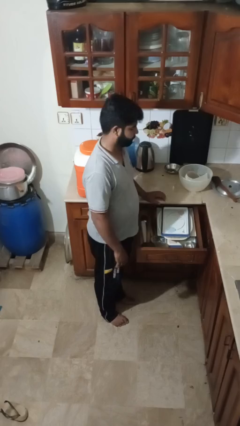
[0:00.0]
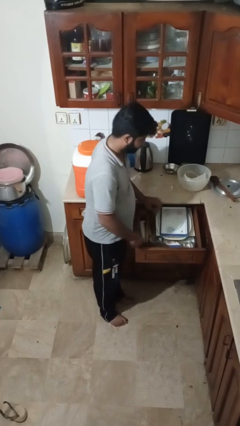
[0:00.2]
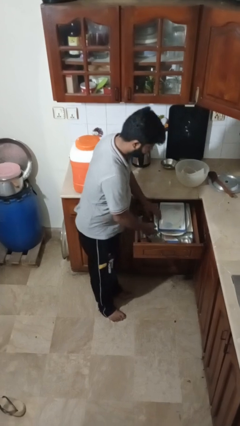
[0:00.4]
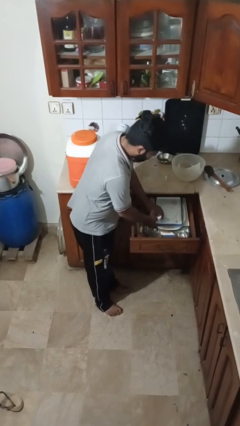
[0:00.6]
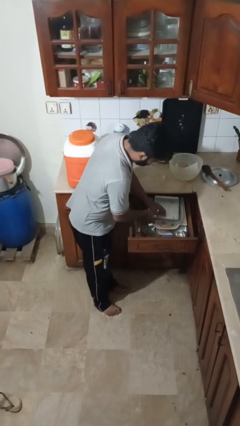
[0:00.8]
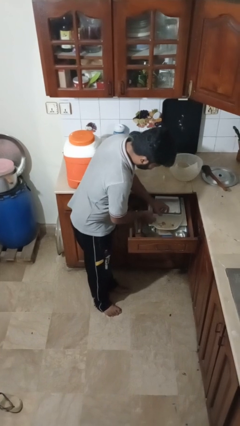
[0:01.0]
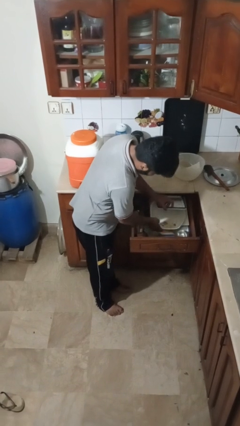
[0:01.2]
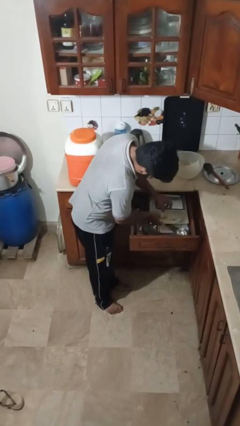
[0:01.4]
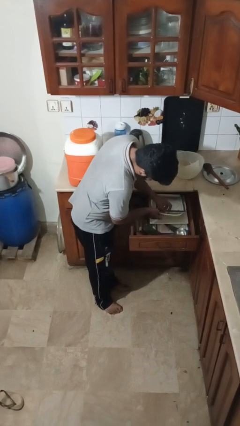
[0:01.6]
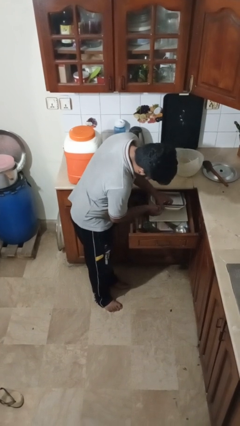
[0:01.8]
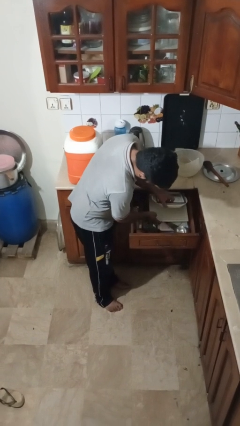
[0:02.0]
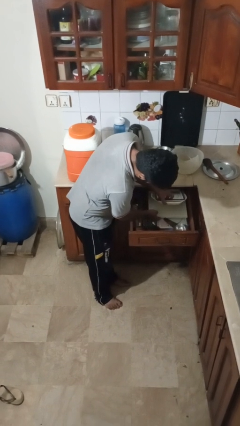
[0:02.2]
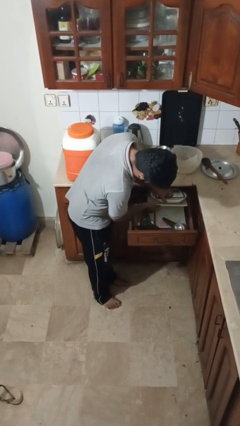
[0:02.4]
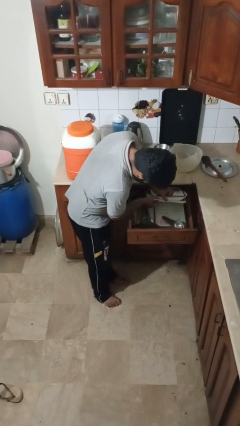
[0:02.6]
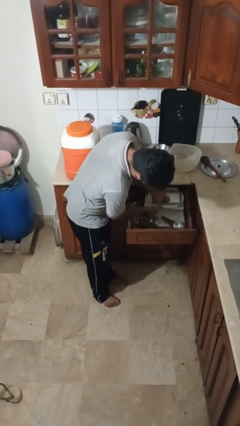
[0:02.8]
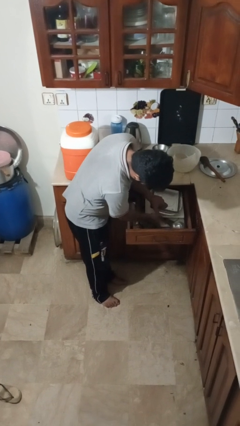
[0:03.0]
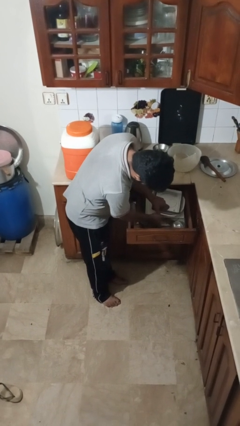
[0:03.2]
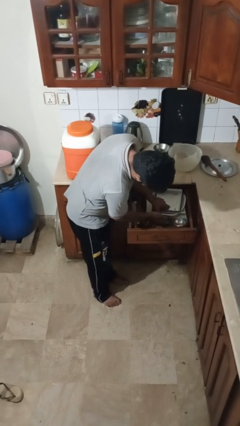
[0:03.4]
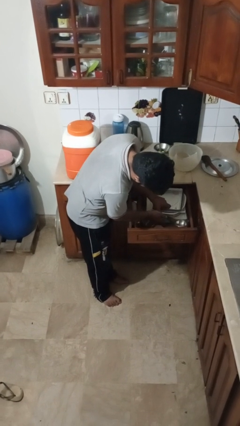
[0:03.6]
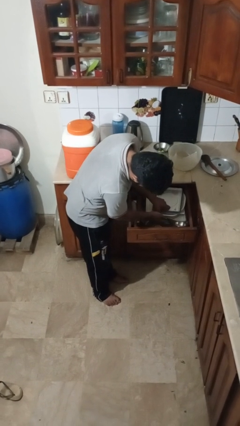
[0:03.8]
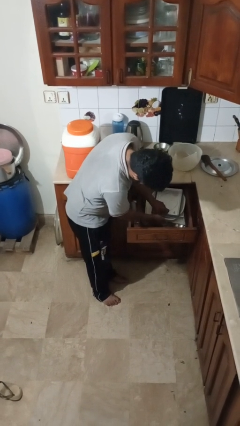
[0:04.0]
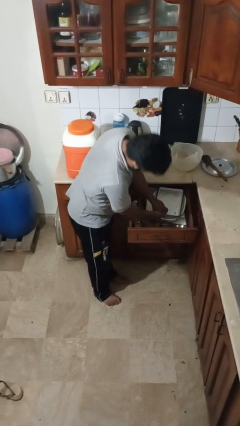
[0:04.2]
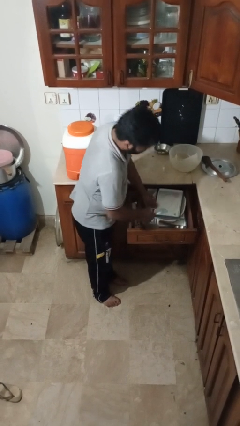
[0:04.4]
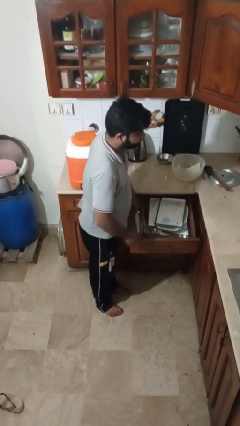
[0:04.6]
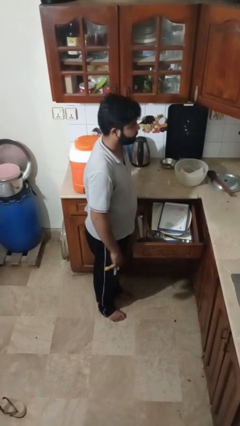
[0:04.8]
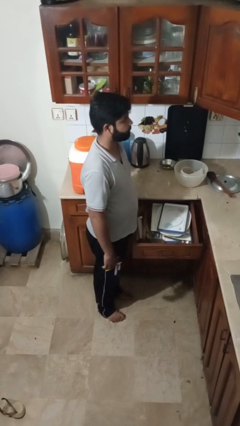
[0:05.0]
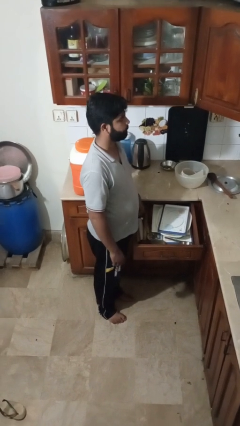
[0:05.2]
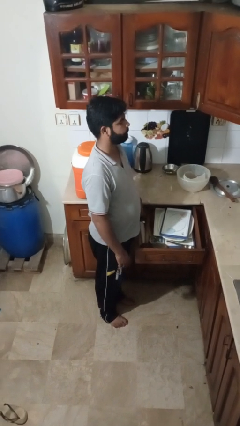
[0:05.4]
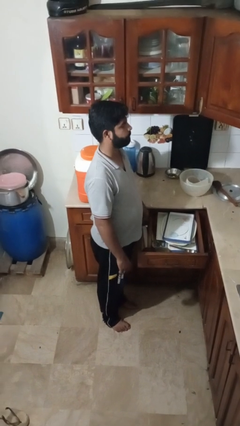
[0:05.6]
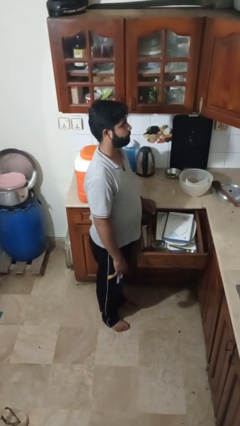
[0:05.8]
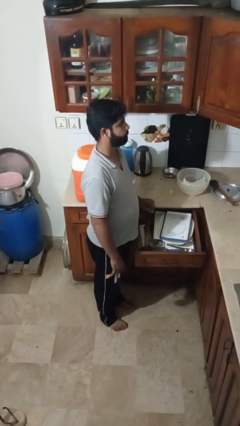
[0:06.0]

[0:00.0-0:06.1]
person searches in kitchen drawer

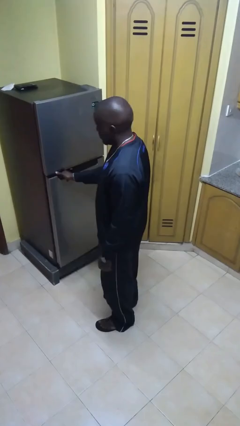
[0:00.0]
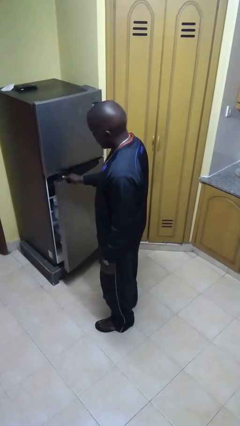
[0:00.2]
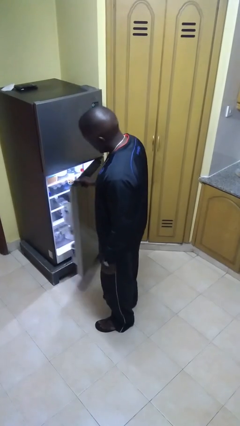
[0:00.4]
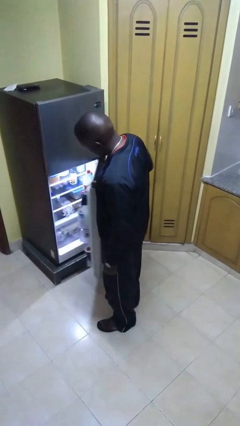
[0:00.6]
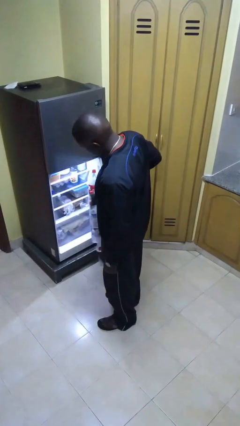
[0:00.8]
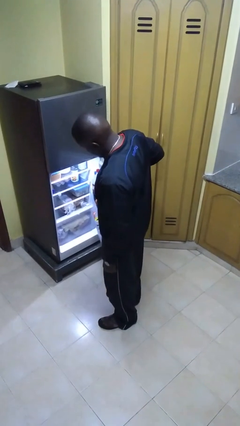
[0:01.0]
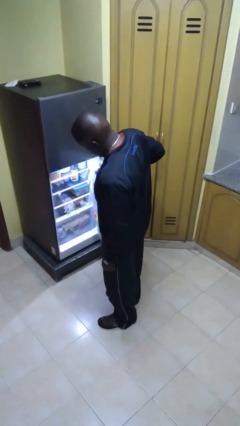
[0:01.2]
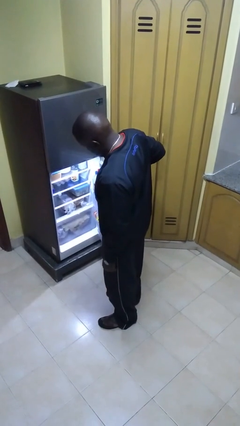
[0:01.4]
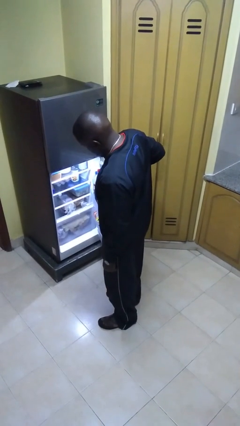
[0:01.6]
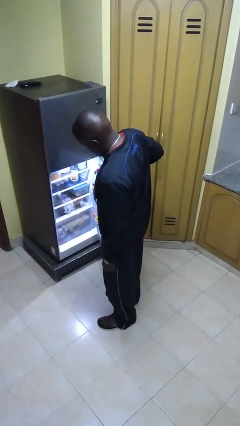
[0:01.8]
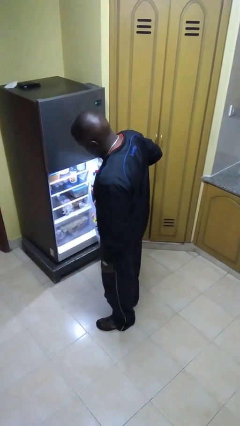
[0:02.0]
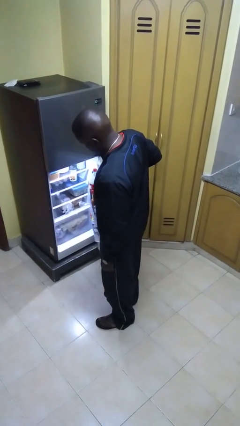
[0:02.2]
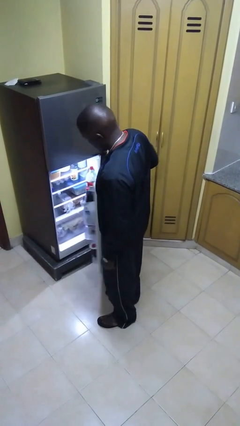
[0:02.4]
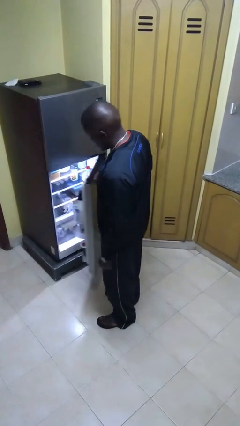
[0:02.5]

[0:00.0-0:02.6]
person dries hands with towel

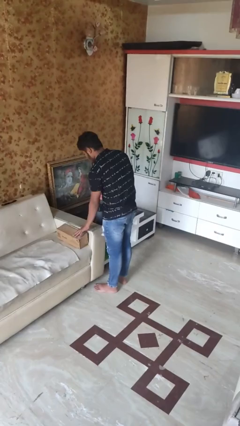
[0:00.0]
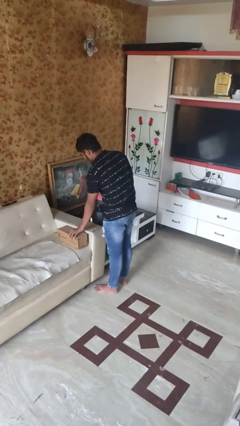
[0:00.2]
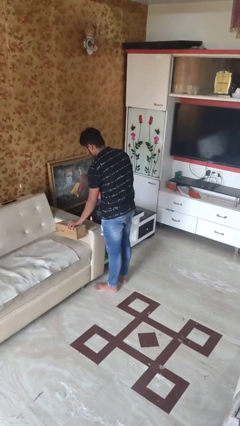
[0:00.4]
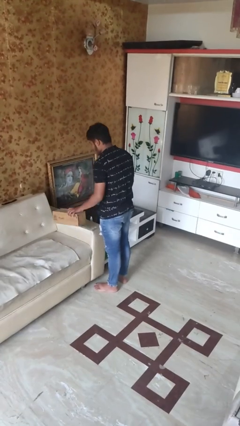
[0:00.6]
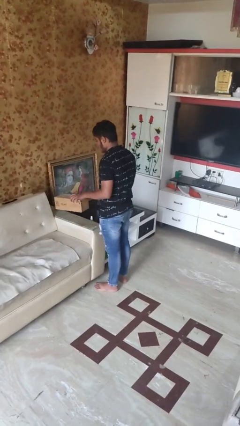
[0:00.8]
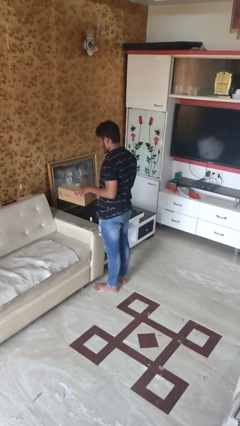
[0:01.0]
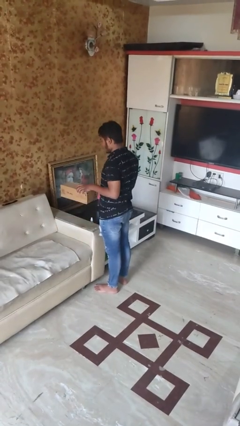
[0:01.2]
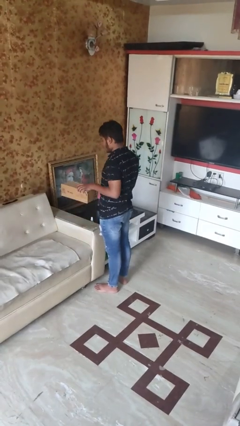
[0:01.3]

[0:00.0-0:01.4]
person picks up object from couch

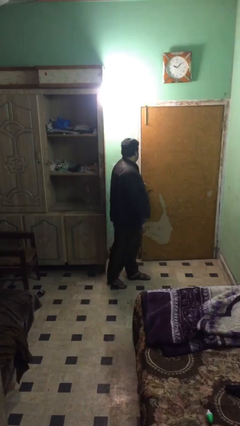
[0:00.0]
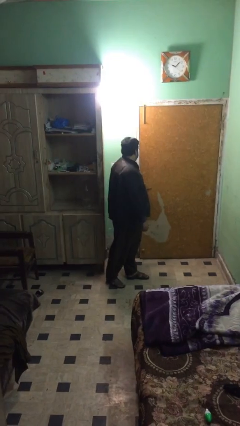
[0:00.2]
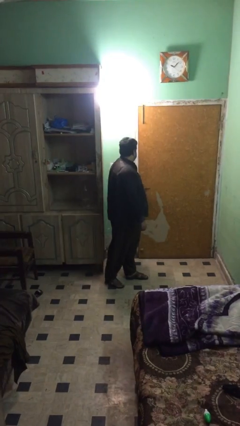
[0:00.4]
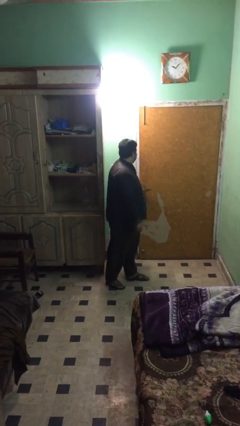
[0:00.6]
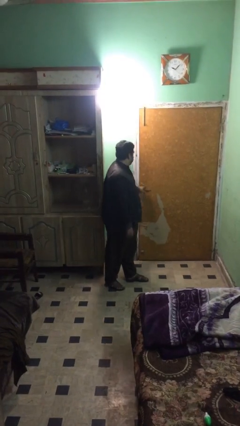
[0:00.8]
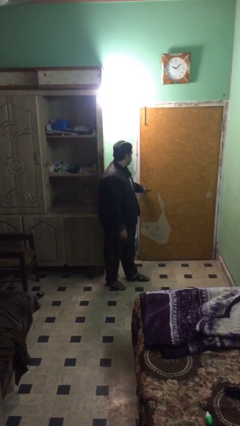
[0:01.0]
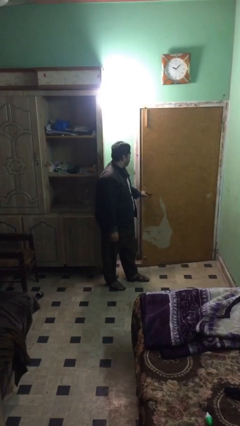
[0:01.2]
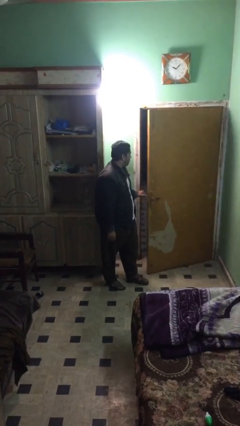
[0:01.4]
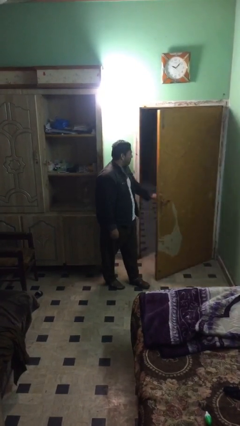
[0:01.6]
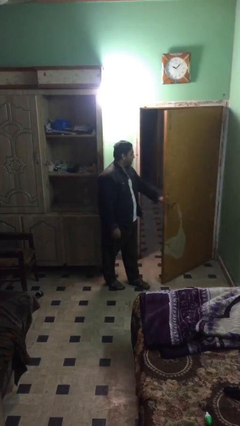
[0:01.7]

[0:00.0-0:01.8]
person opens facility door

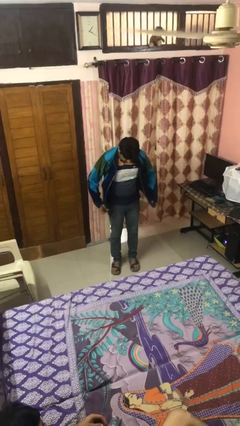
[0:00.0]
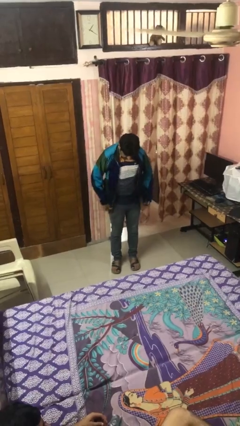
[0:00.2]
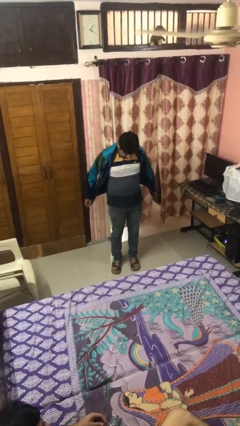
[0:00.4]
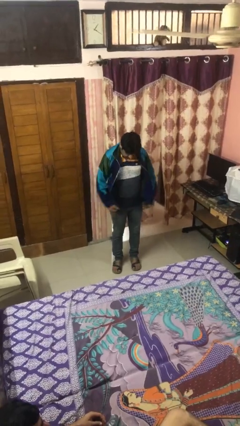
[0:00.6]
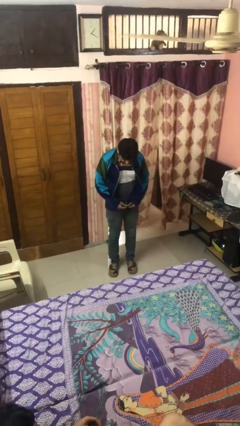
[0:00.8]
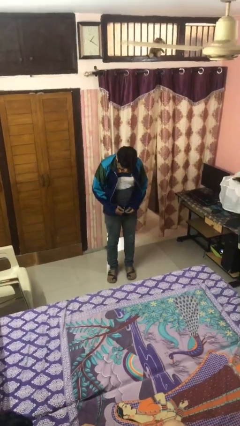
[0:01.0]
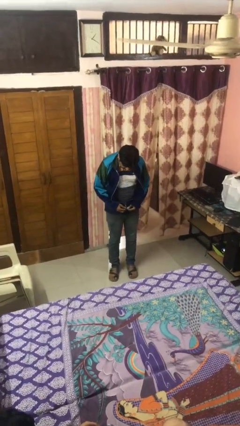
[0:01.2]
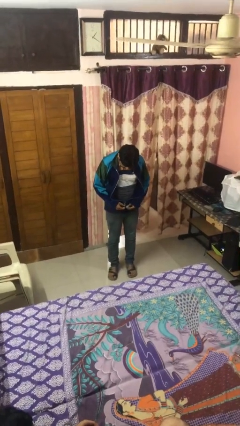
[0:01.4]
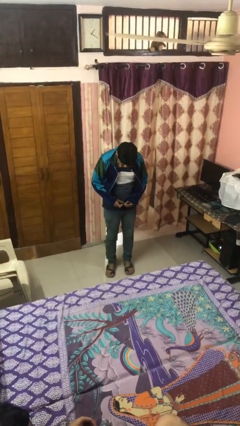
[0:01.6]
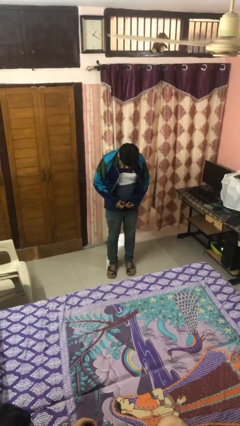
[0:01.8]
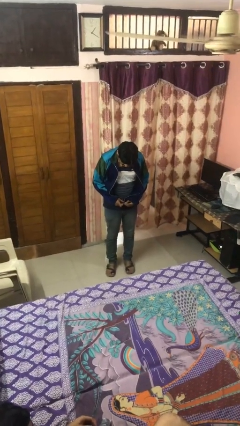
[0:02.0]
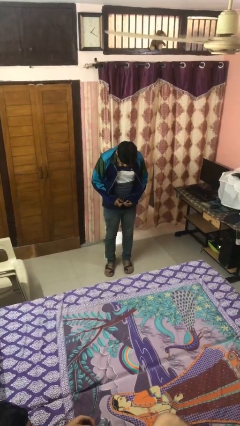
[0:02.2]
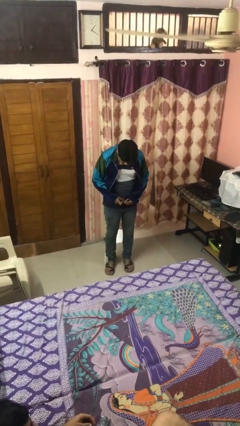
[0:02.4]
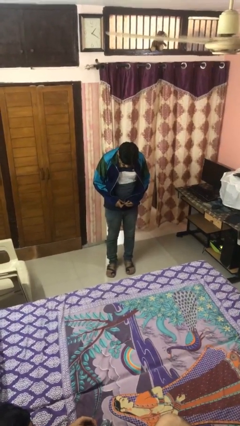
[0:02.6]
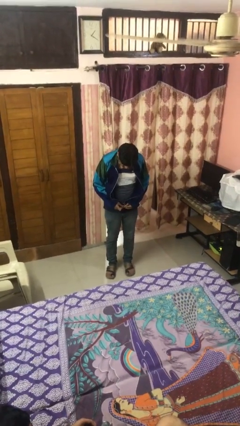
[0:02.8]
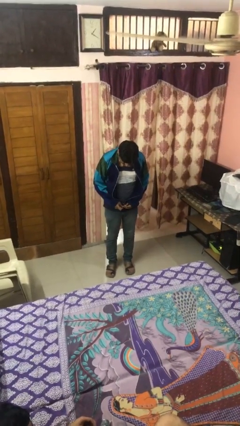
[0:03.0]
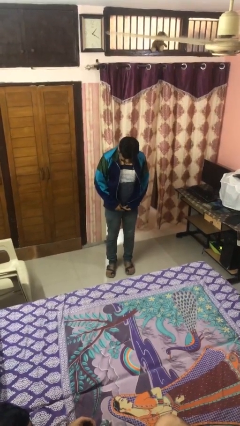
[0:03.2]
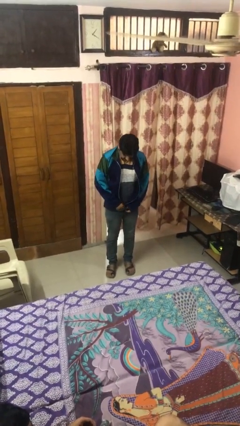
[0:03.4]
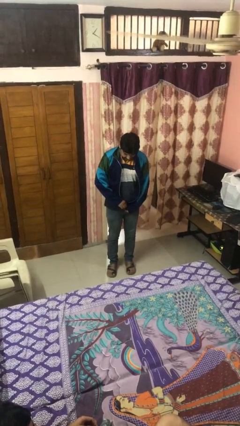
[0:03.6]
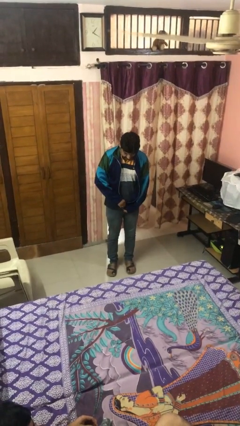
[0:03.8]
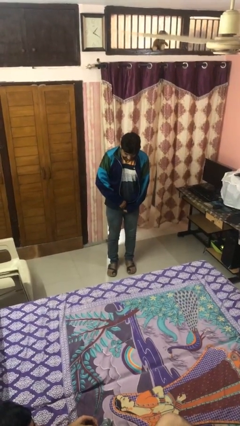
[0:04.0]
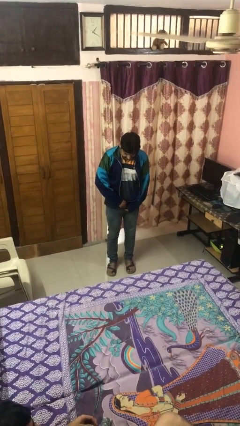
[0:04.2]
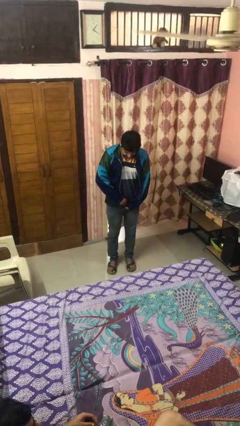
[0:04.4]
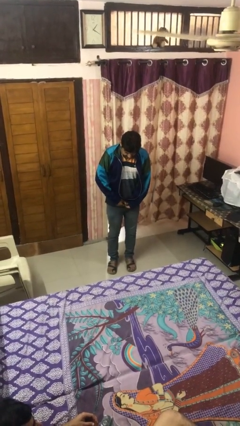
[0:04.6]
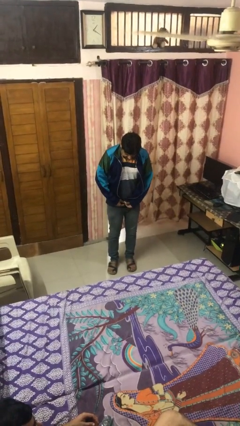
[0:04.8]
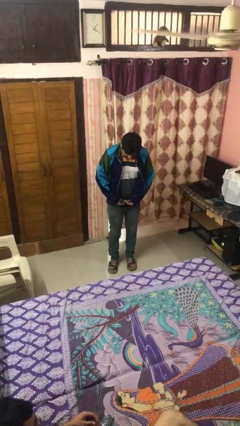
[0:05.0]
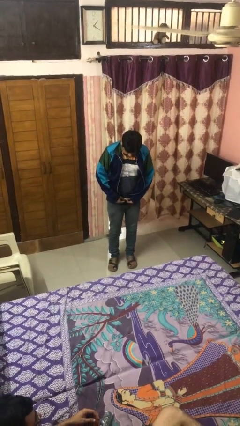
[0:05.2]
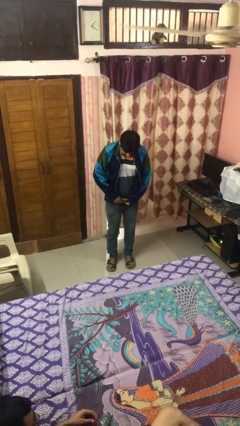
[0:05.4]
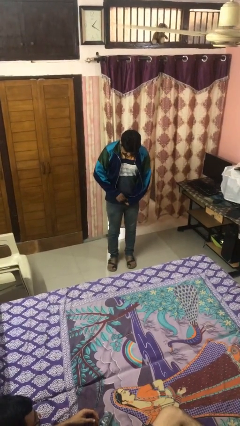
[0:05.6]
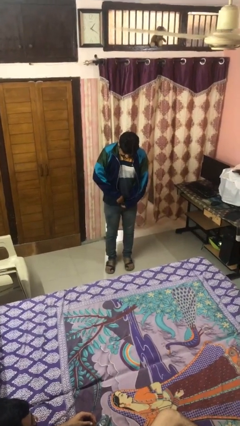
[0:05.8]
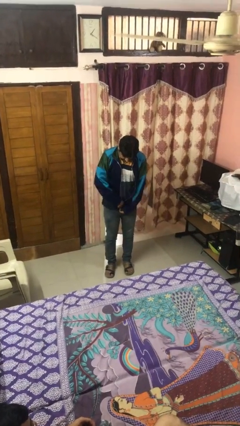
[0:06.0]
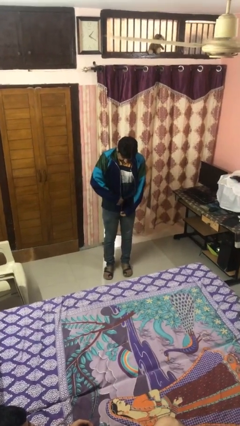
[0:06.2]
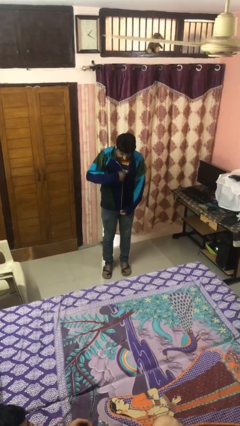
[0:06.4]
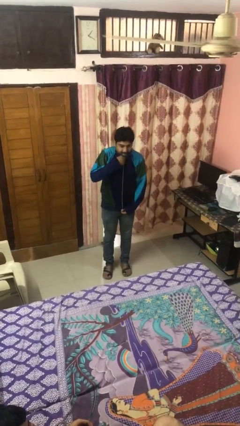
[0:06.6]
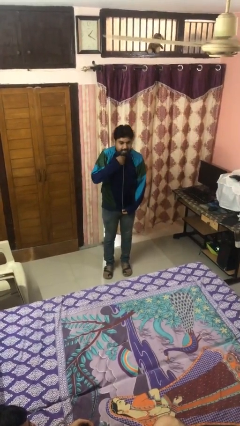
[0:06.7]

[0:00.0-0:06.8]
person zips up jacket
